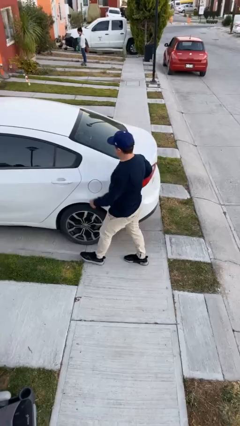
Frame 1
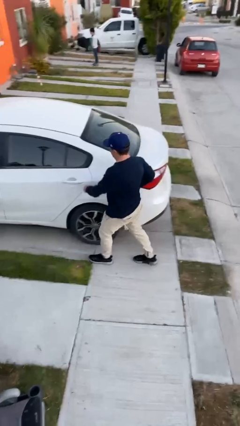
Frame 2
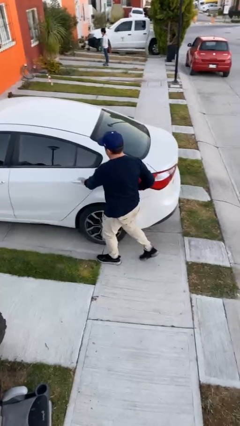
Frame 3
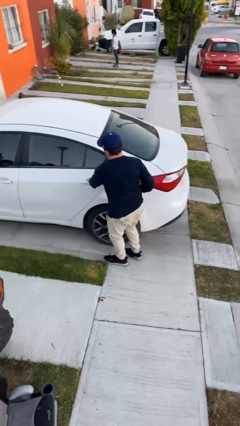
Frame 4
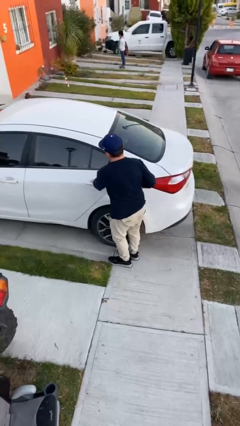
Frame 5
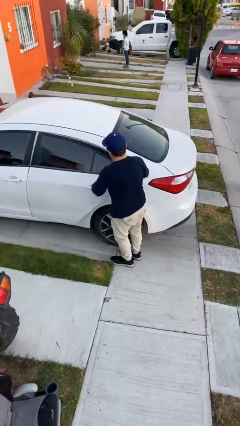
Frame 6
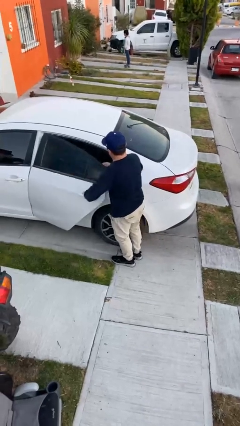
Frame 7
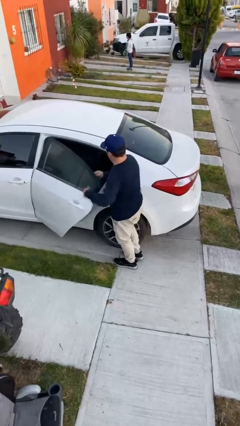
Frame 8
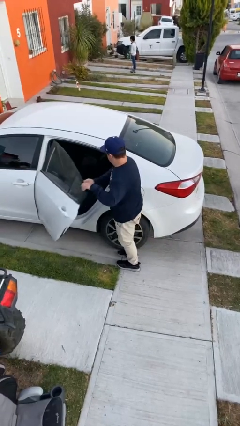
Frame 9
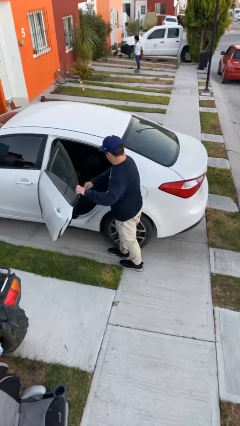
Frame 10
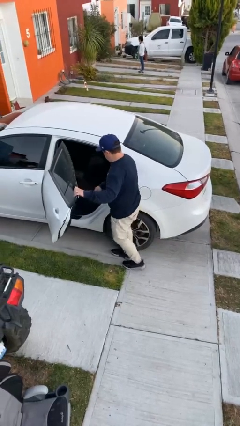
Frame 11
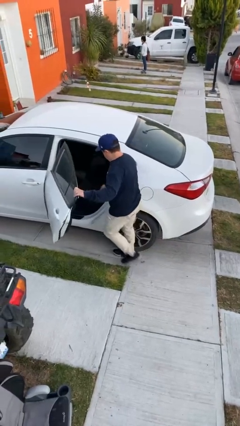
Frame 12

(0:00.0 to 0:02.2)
person opens car door

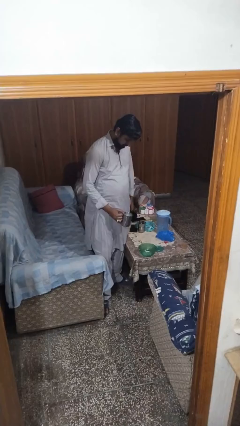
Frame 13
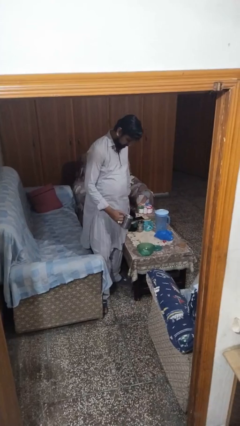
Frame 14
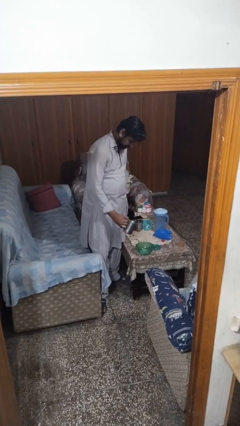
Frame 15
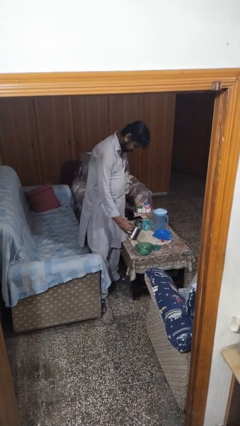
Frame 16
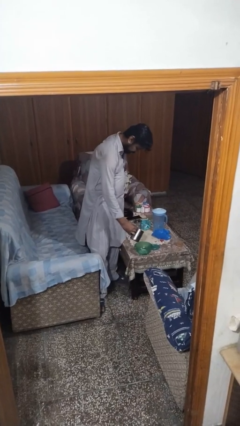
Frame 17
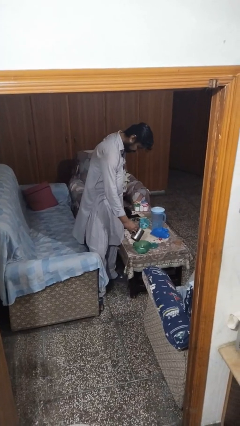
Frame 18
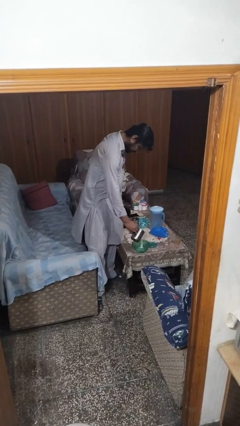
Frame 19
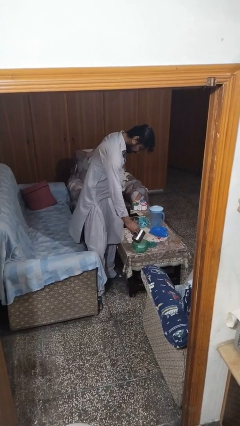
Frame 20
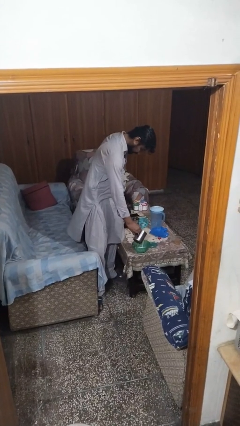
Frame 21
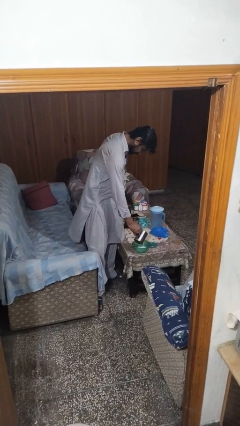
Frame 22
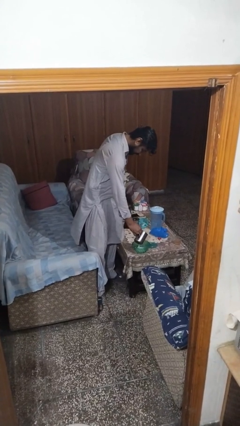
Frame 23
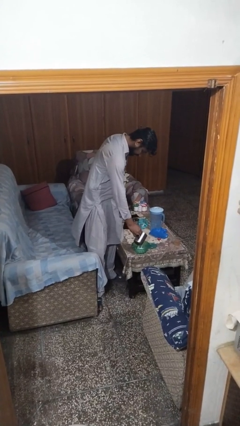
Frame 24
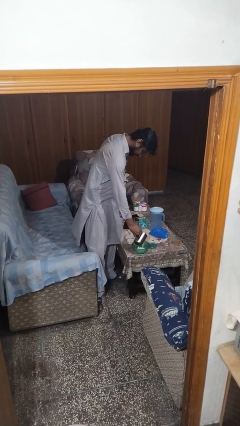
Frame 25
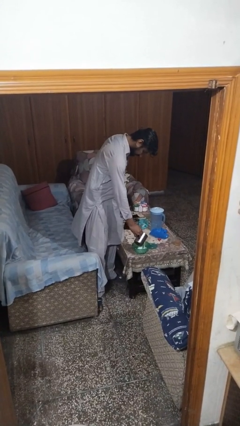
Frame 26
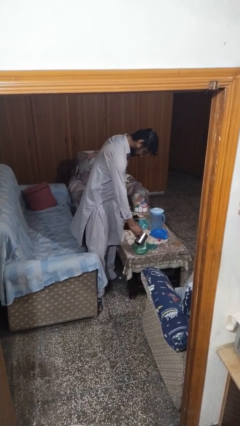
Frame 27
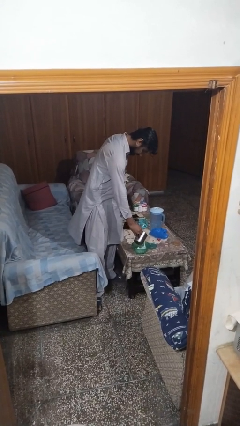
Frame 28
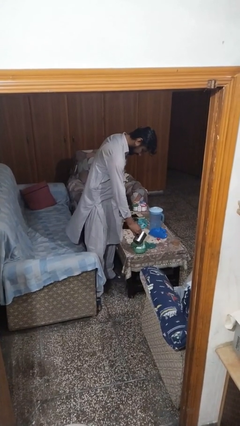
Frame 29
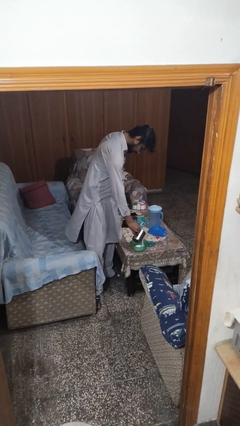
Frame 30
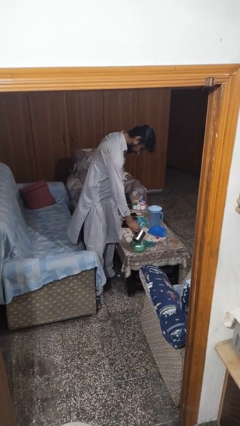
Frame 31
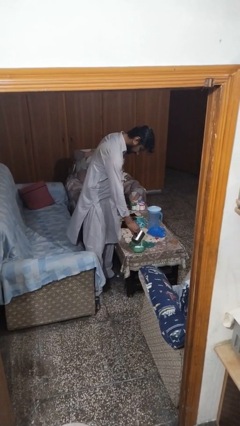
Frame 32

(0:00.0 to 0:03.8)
person pours into bowl

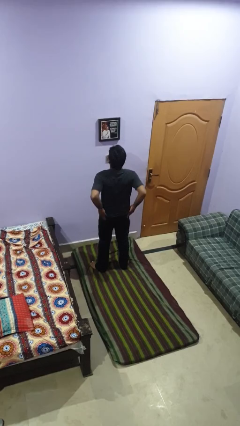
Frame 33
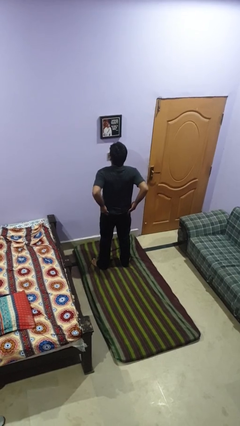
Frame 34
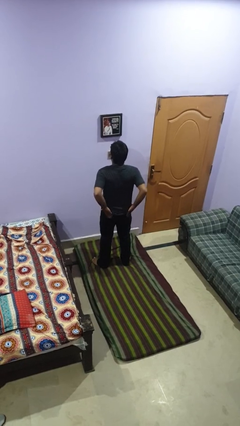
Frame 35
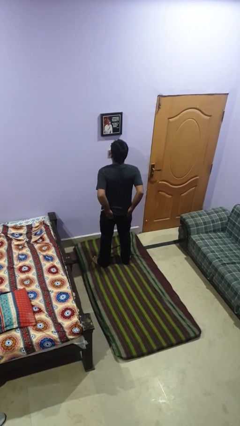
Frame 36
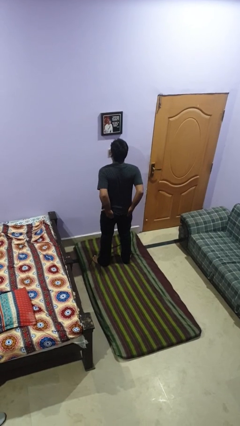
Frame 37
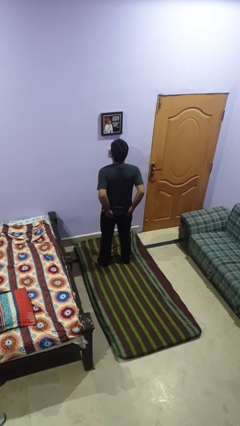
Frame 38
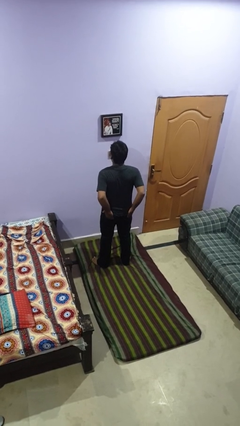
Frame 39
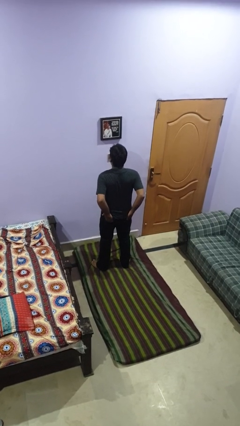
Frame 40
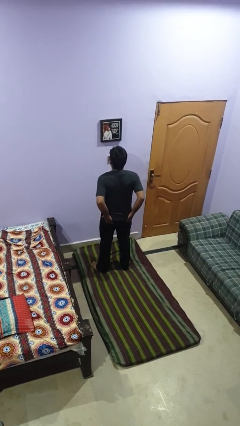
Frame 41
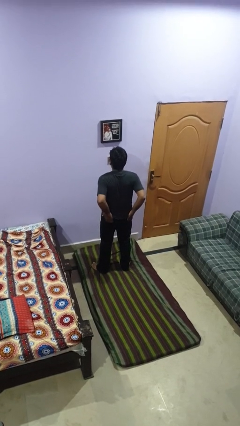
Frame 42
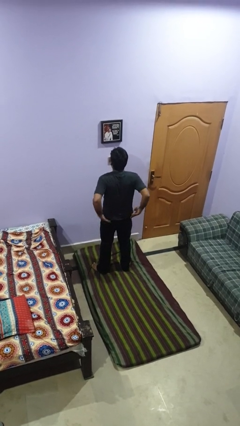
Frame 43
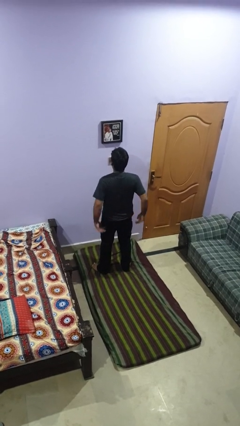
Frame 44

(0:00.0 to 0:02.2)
person puts hands in back pockets

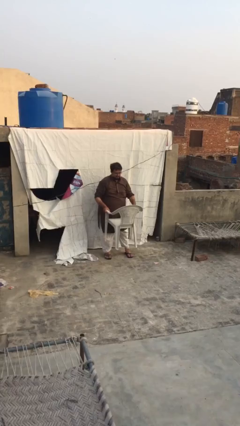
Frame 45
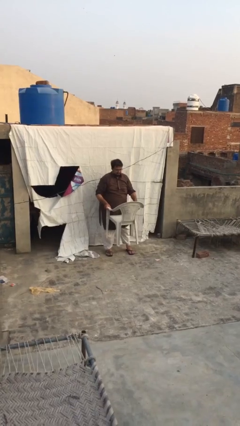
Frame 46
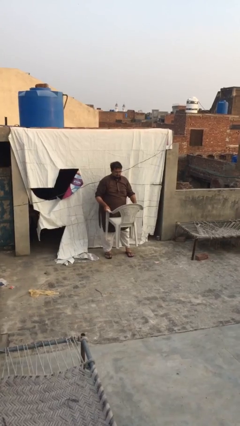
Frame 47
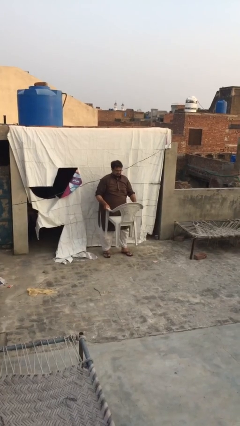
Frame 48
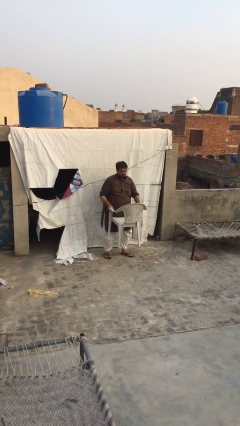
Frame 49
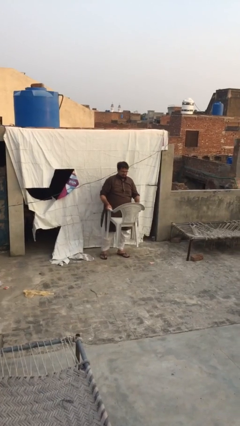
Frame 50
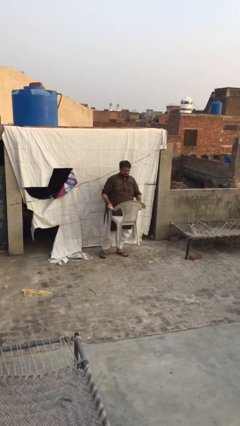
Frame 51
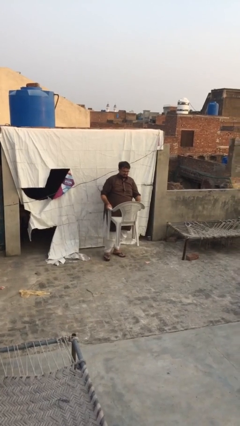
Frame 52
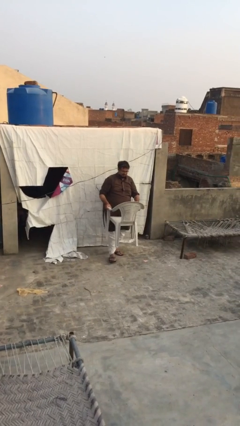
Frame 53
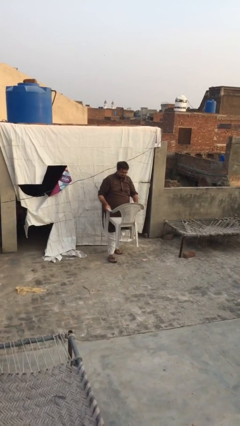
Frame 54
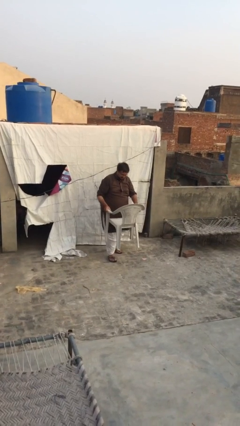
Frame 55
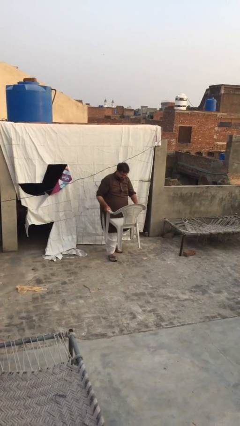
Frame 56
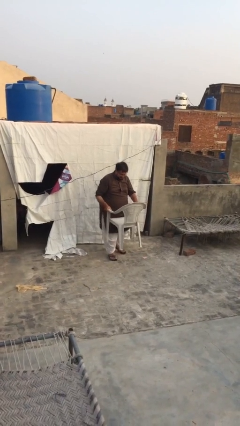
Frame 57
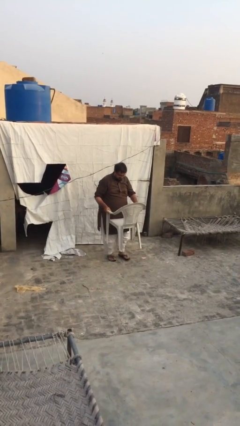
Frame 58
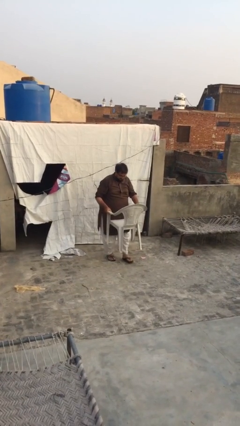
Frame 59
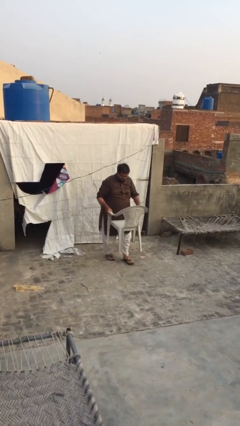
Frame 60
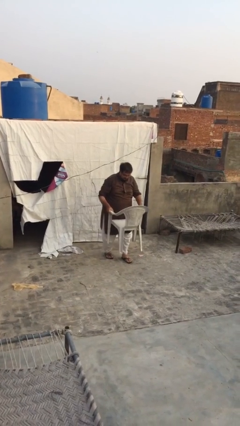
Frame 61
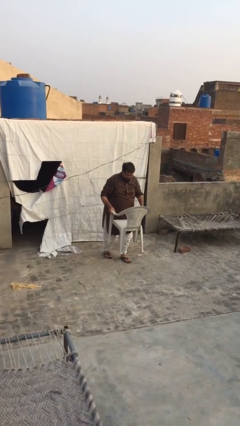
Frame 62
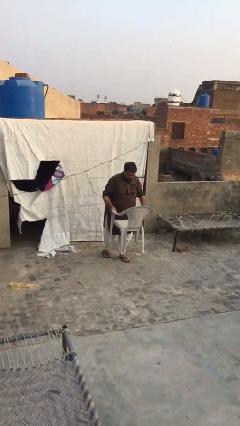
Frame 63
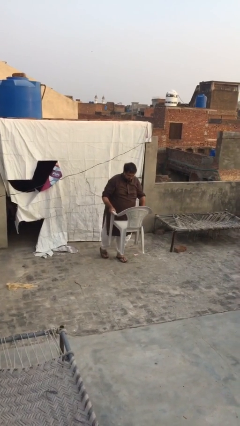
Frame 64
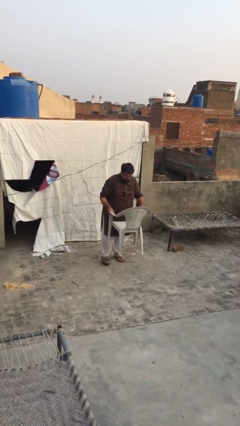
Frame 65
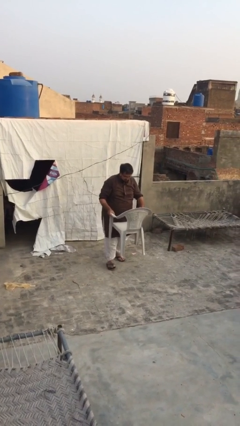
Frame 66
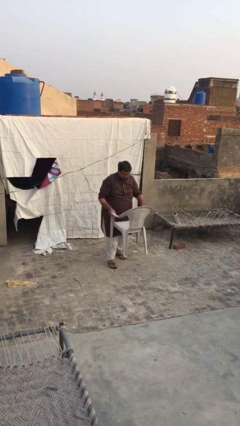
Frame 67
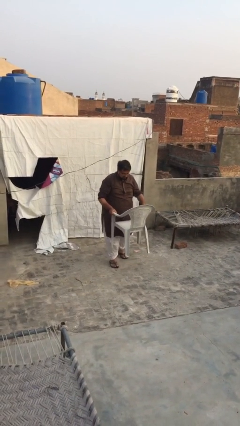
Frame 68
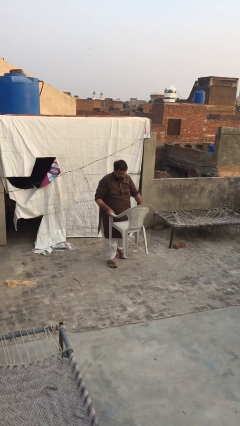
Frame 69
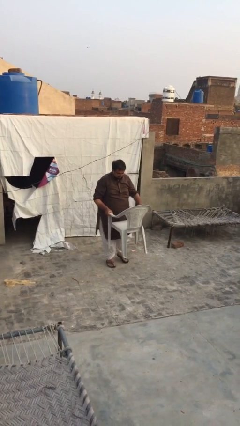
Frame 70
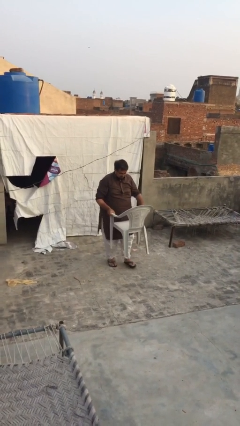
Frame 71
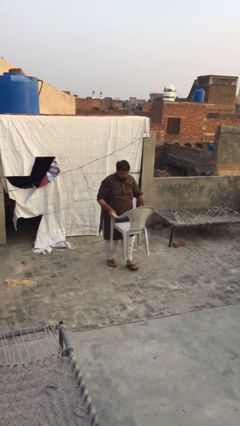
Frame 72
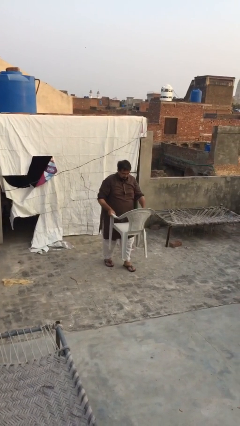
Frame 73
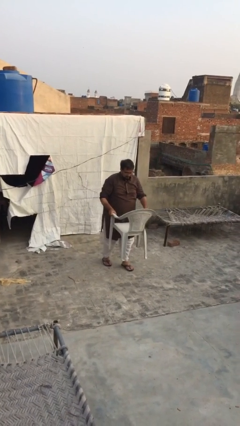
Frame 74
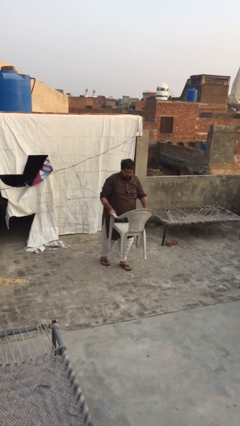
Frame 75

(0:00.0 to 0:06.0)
person carries heavy object

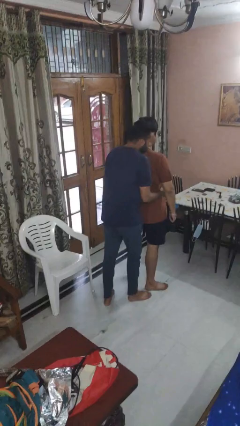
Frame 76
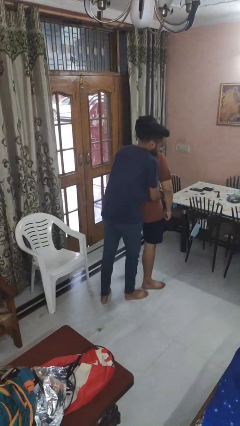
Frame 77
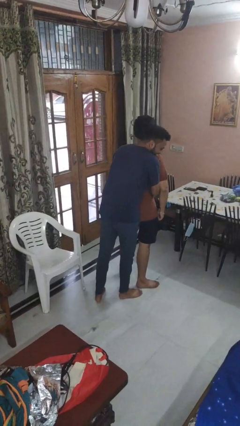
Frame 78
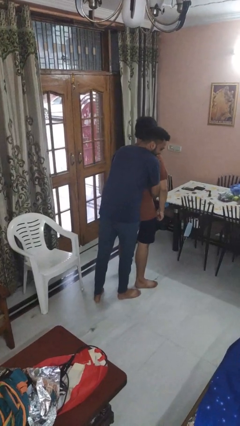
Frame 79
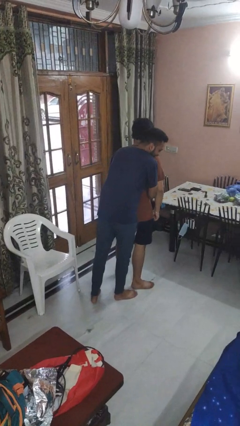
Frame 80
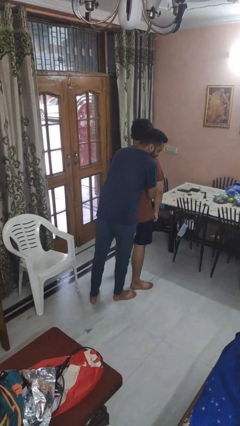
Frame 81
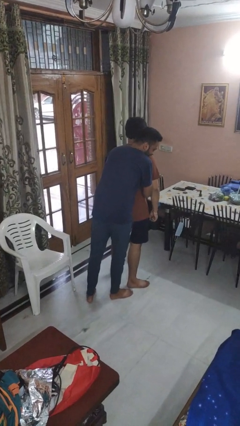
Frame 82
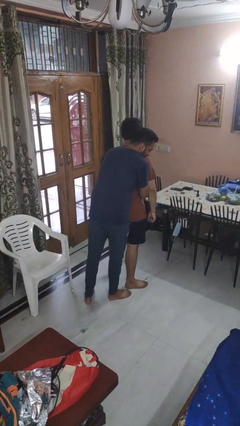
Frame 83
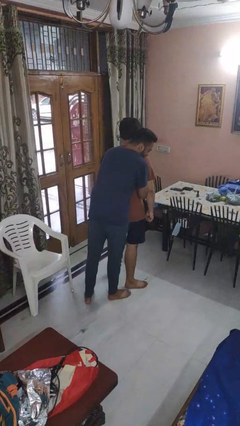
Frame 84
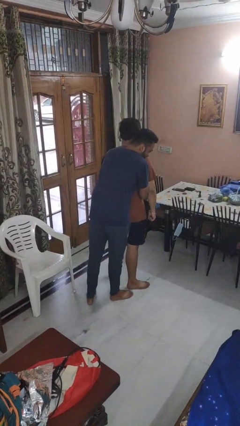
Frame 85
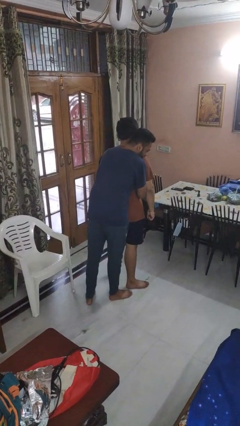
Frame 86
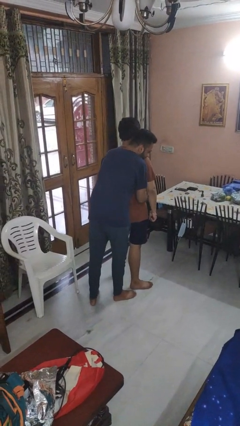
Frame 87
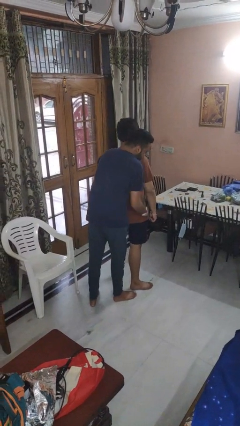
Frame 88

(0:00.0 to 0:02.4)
person hugs person from behind

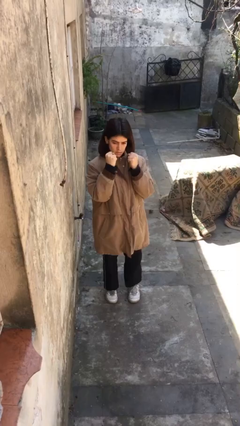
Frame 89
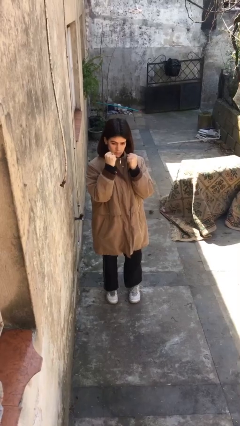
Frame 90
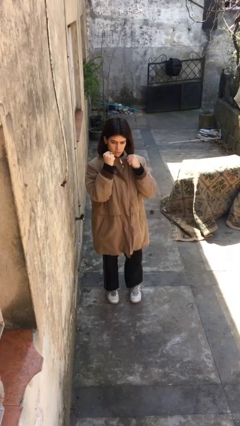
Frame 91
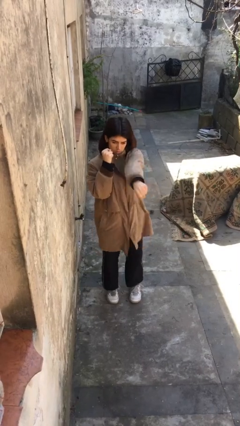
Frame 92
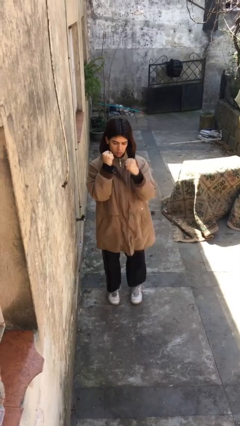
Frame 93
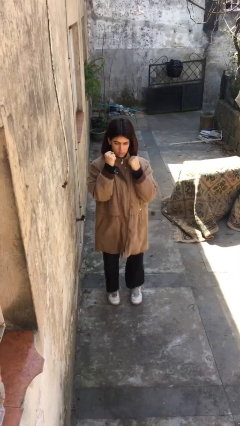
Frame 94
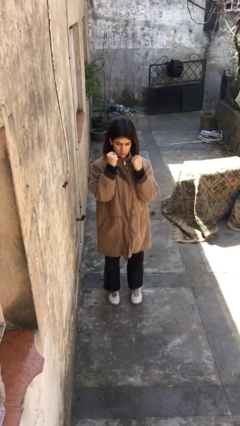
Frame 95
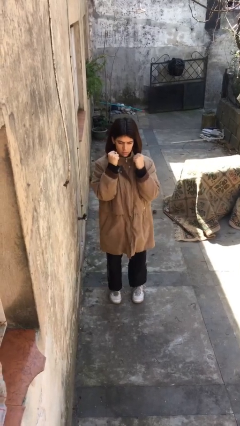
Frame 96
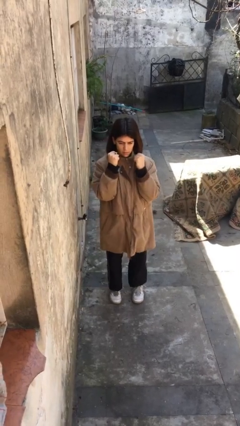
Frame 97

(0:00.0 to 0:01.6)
person punches
